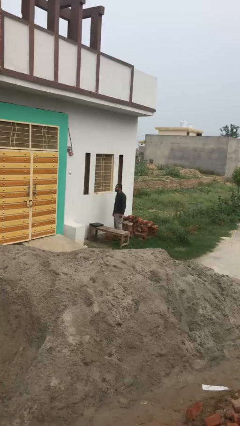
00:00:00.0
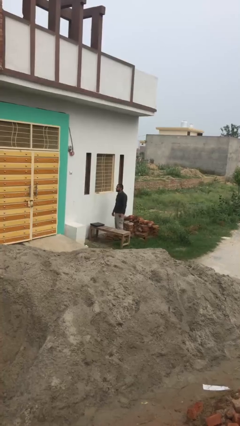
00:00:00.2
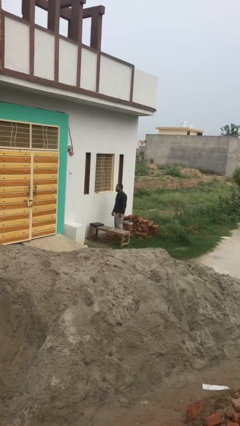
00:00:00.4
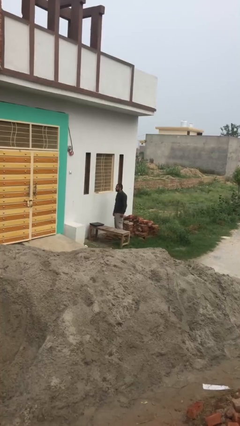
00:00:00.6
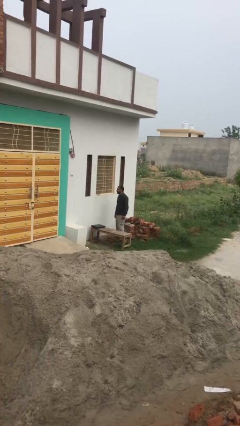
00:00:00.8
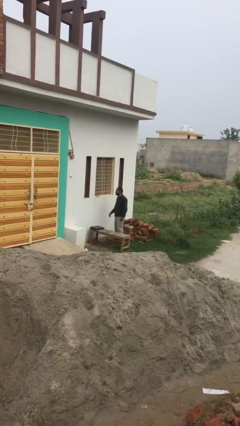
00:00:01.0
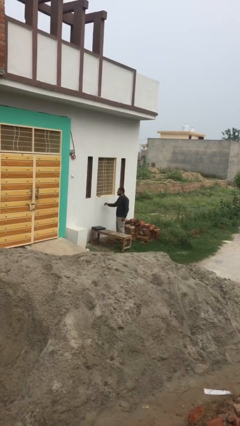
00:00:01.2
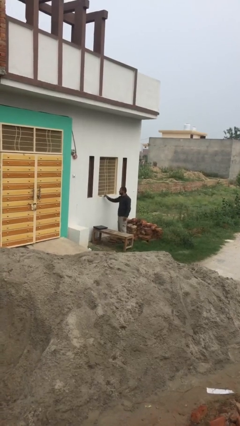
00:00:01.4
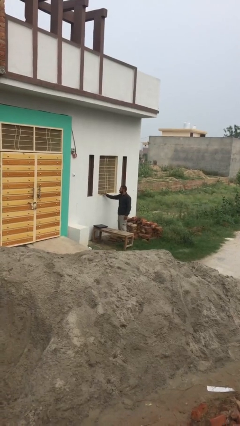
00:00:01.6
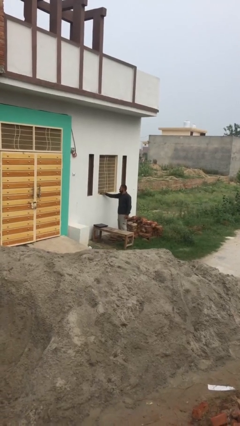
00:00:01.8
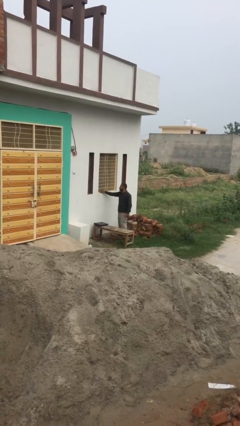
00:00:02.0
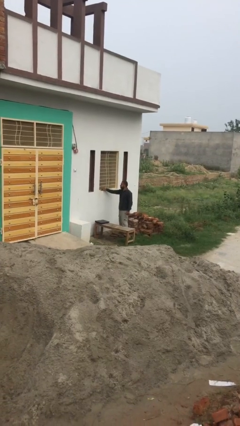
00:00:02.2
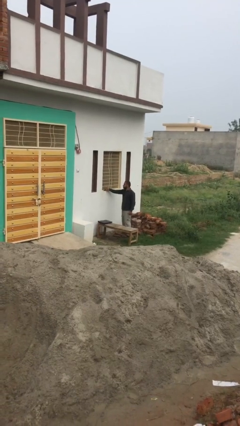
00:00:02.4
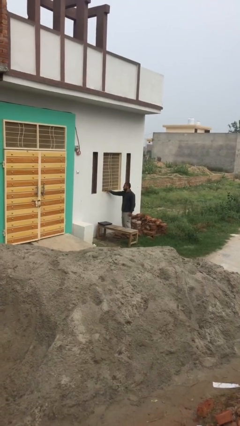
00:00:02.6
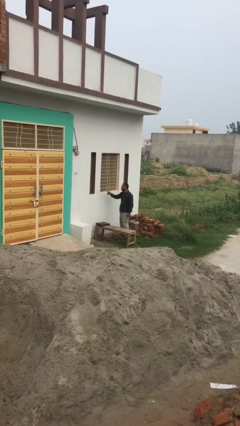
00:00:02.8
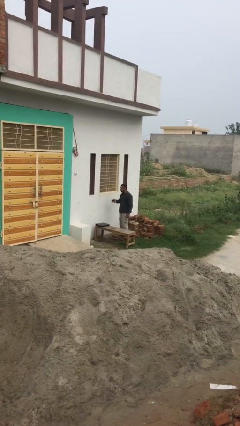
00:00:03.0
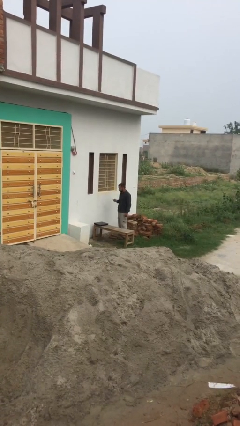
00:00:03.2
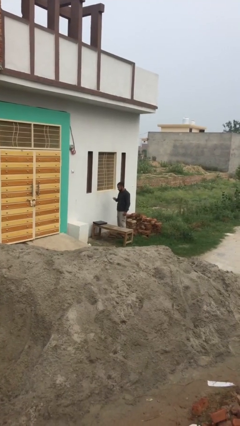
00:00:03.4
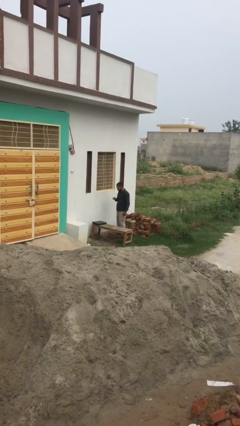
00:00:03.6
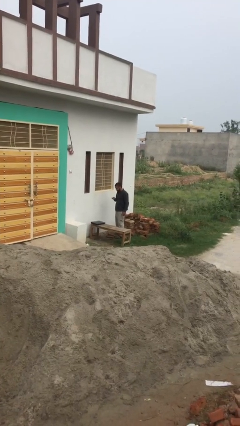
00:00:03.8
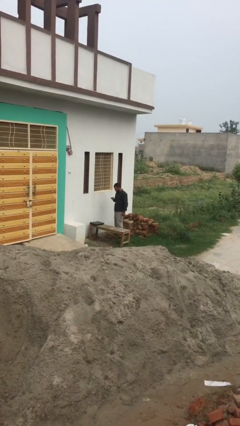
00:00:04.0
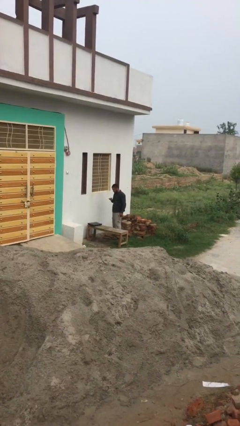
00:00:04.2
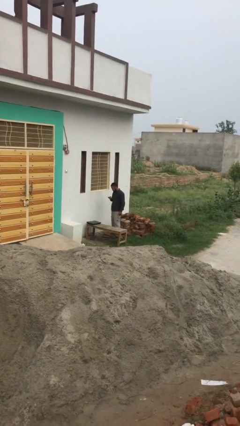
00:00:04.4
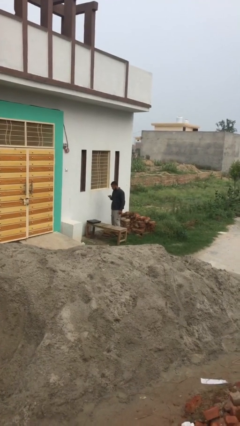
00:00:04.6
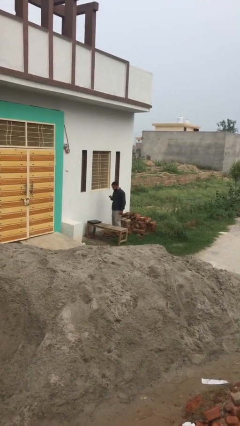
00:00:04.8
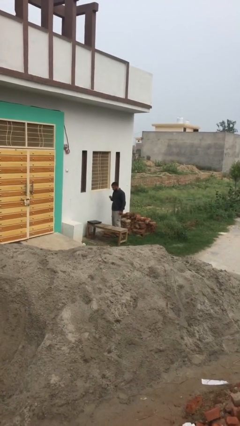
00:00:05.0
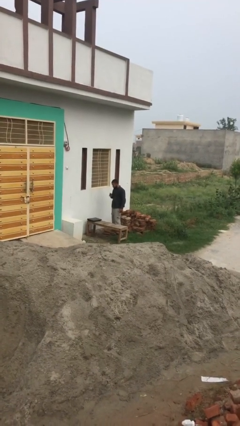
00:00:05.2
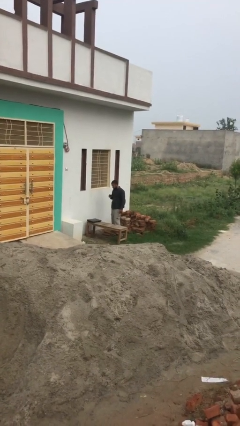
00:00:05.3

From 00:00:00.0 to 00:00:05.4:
person picks up object from shelf

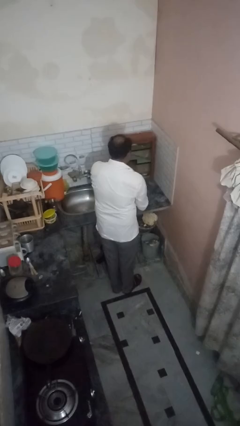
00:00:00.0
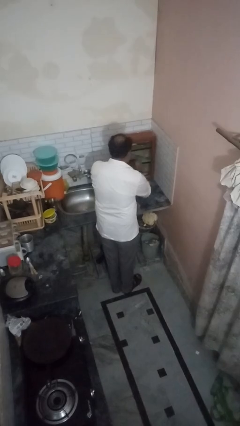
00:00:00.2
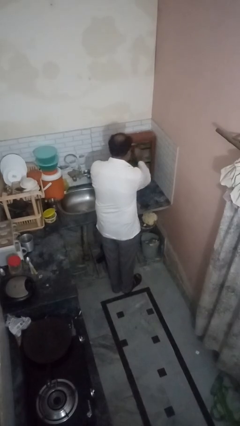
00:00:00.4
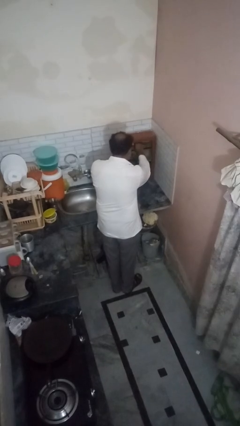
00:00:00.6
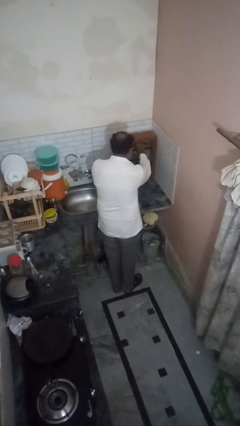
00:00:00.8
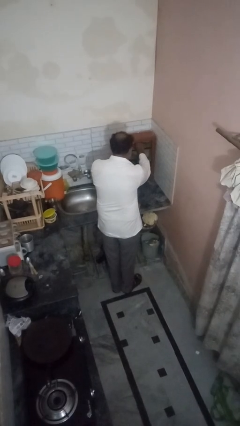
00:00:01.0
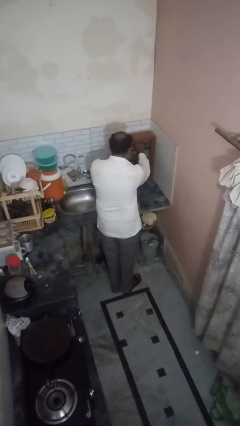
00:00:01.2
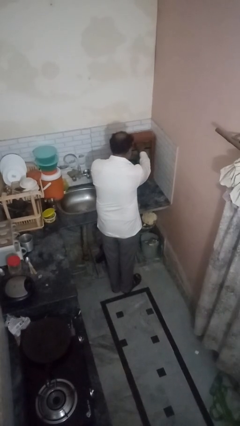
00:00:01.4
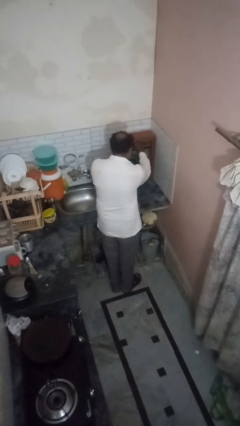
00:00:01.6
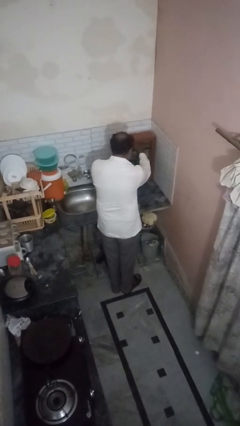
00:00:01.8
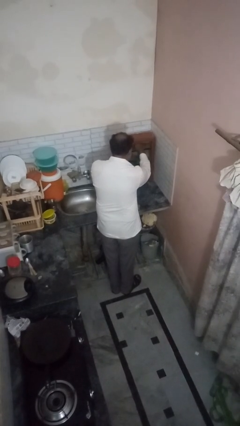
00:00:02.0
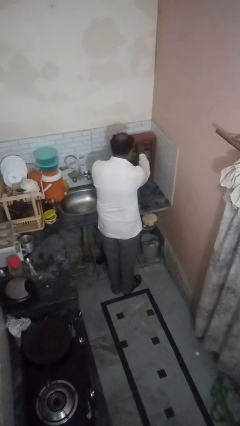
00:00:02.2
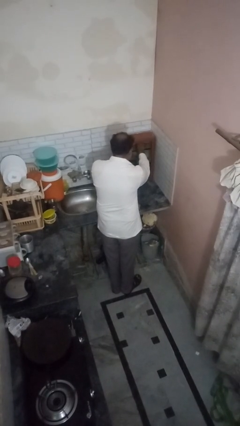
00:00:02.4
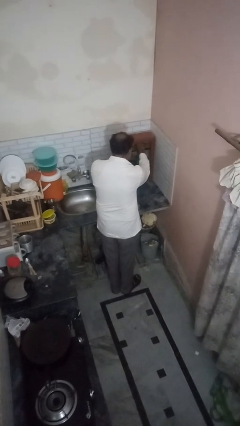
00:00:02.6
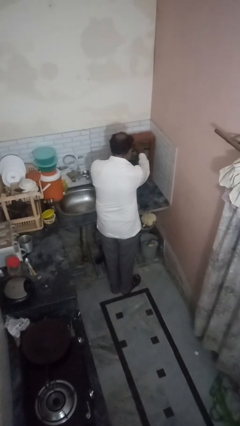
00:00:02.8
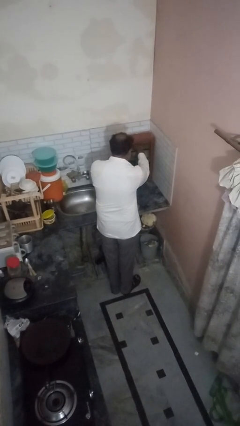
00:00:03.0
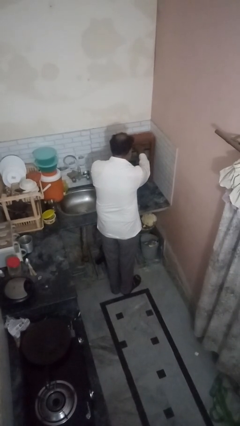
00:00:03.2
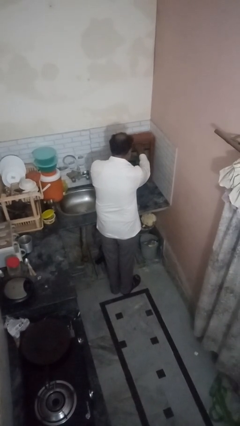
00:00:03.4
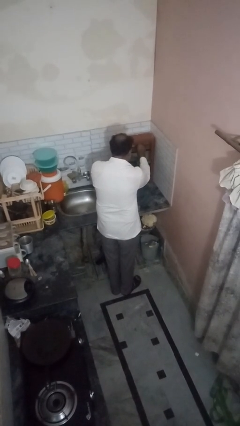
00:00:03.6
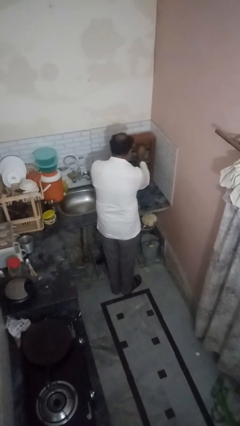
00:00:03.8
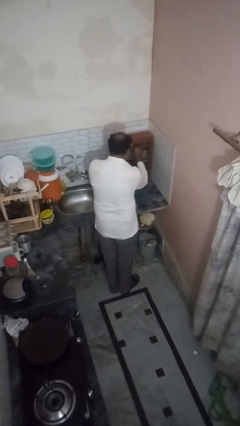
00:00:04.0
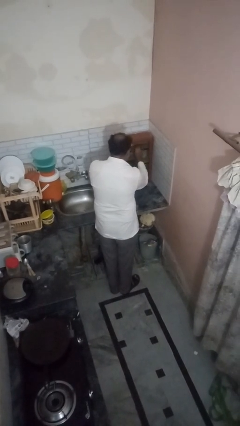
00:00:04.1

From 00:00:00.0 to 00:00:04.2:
person searches in kitchen drawer

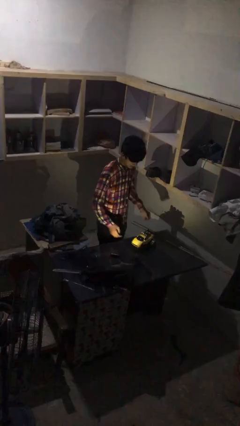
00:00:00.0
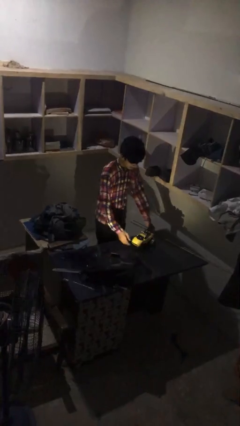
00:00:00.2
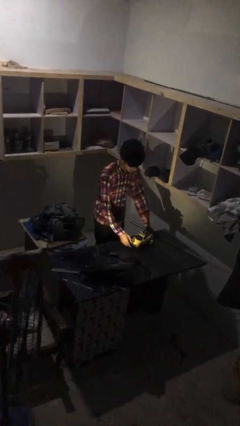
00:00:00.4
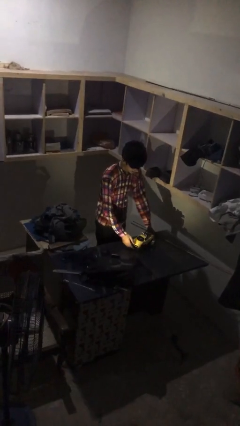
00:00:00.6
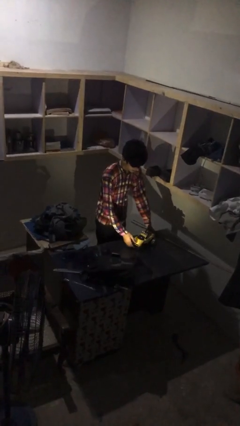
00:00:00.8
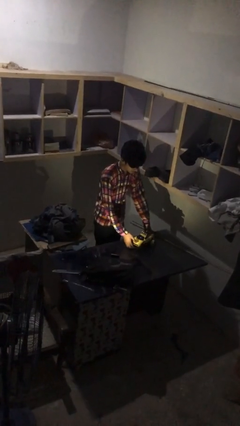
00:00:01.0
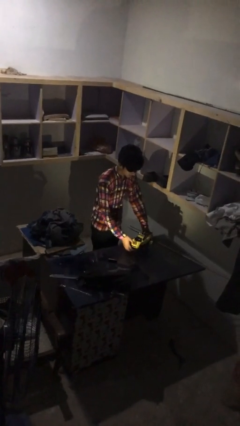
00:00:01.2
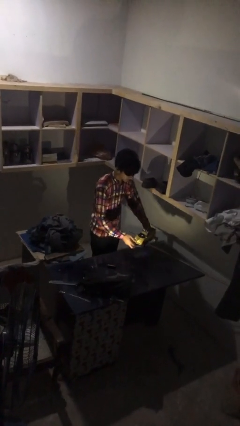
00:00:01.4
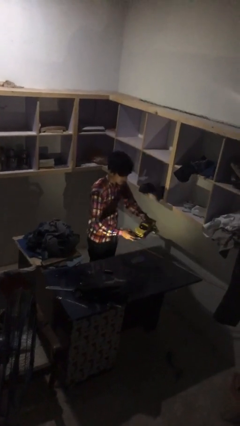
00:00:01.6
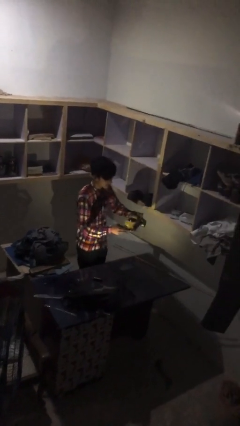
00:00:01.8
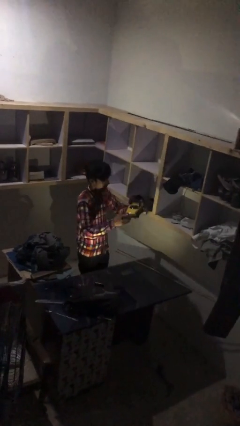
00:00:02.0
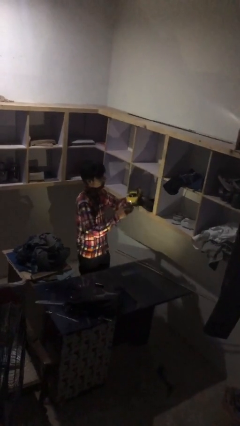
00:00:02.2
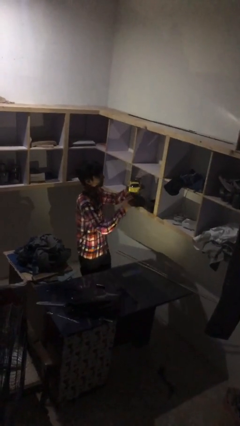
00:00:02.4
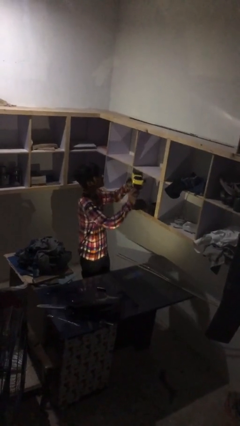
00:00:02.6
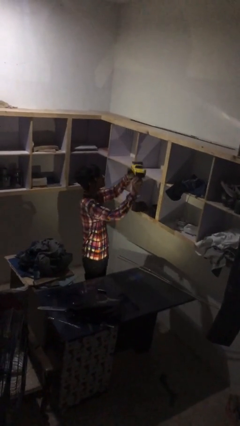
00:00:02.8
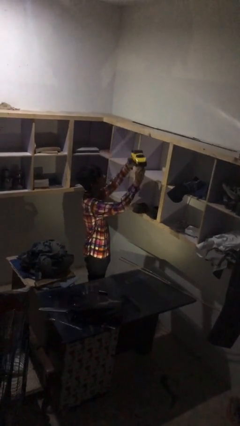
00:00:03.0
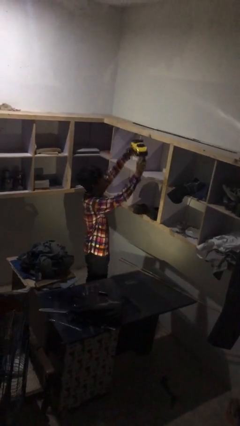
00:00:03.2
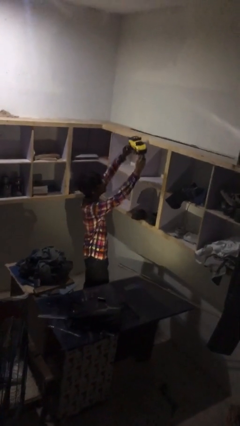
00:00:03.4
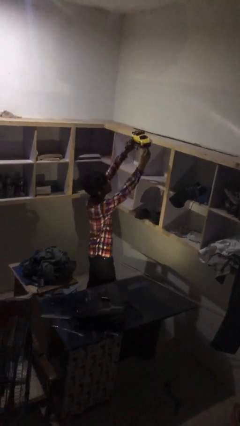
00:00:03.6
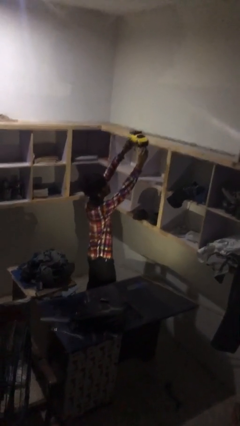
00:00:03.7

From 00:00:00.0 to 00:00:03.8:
person picks up object from table

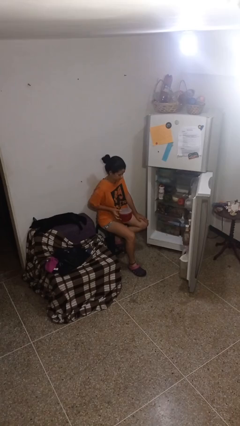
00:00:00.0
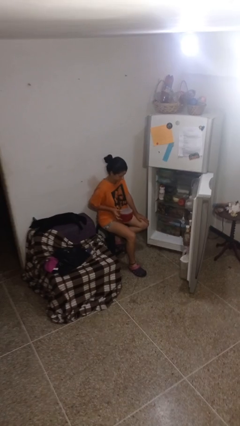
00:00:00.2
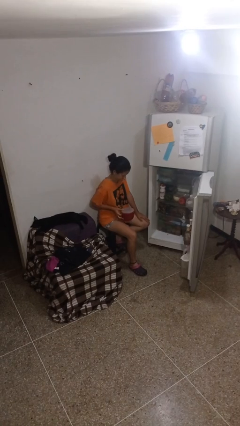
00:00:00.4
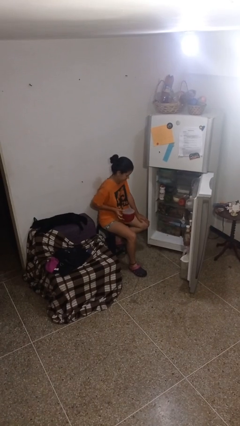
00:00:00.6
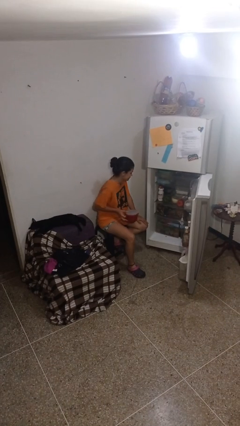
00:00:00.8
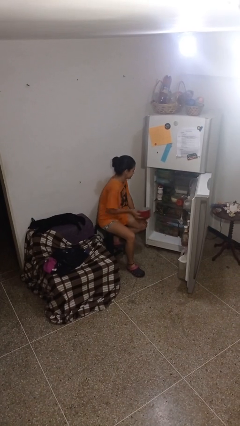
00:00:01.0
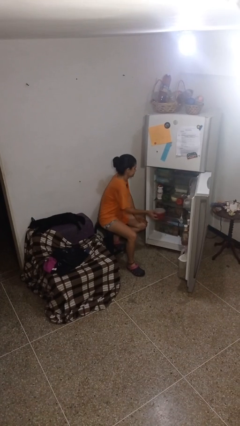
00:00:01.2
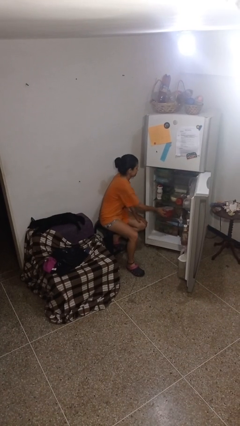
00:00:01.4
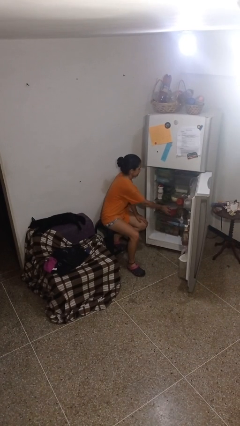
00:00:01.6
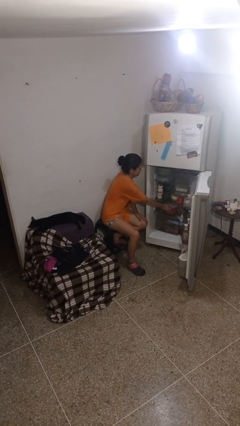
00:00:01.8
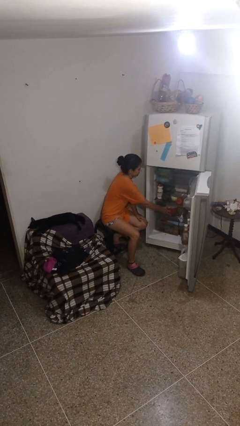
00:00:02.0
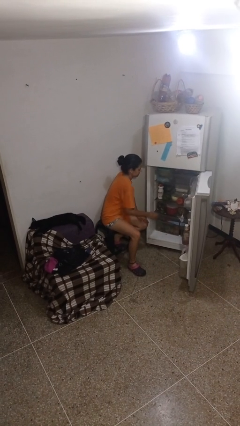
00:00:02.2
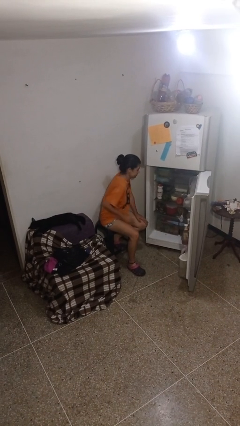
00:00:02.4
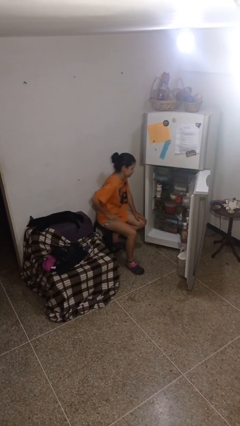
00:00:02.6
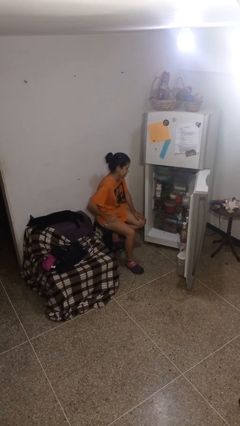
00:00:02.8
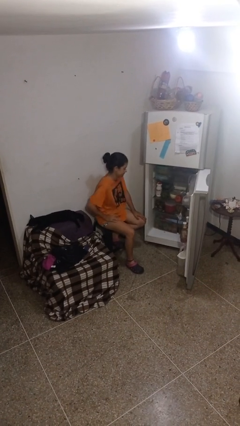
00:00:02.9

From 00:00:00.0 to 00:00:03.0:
person puts object into refrigerator

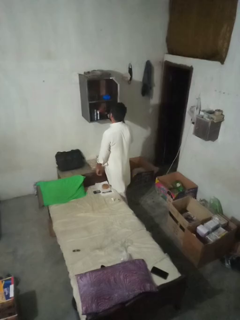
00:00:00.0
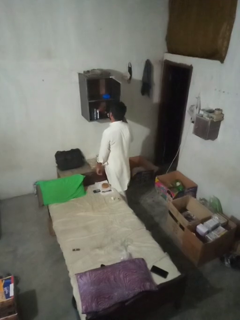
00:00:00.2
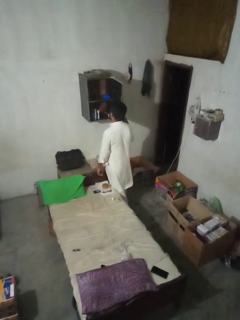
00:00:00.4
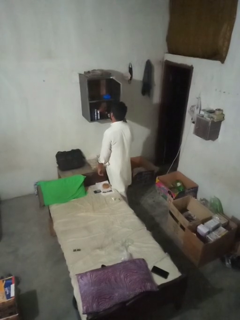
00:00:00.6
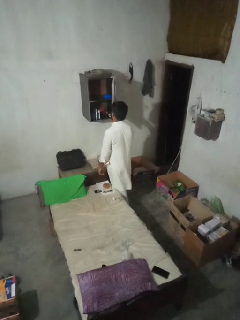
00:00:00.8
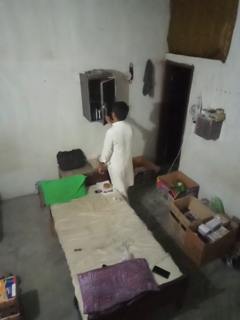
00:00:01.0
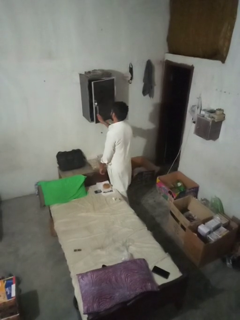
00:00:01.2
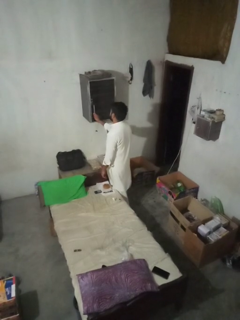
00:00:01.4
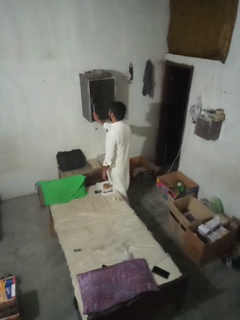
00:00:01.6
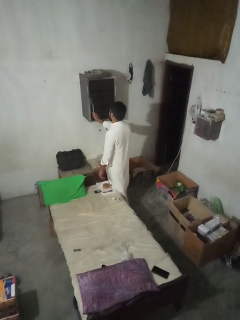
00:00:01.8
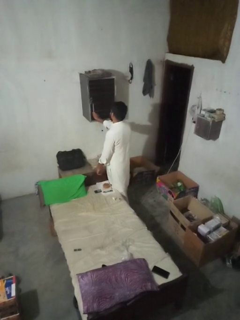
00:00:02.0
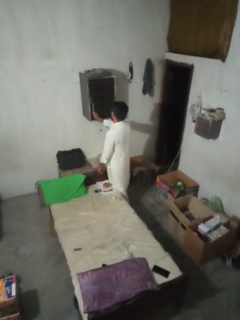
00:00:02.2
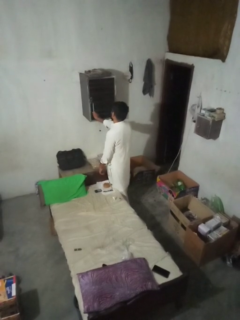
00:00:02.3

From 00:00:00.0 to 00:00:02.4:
person closes dresser drawer
